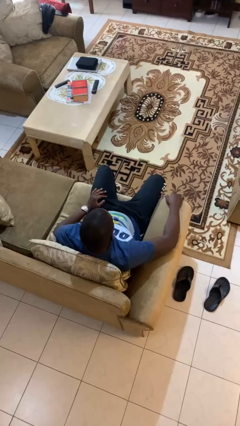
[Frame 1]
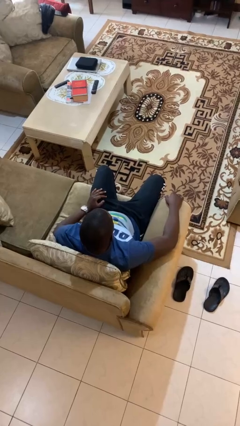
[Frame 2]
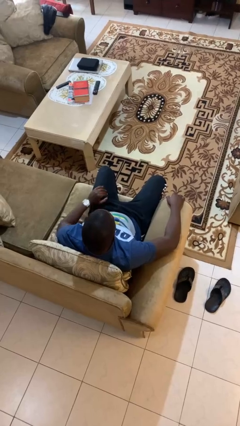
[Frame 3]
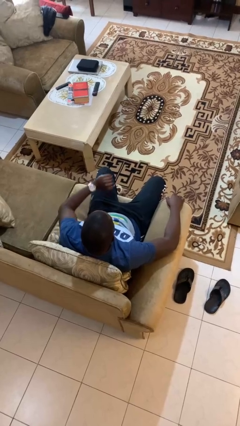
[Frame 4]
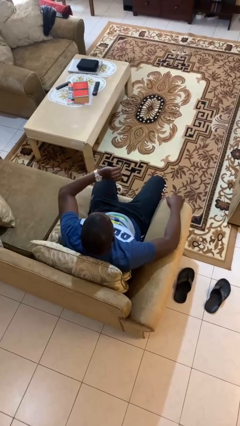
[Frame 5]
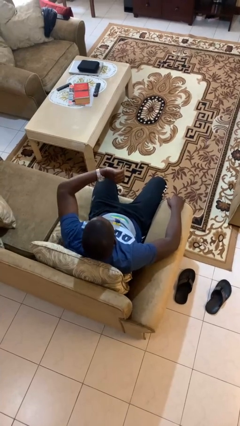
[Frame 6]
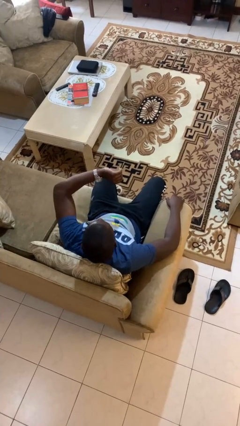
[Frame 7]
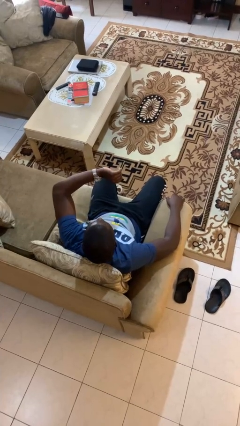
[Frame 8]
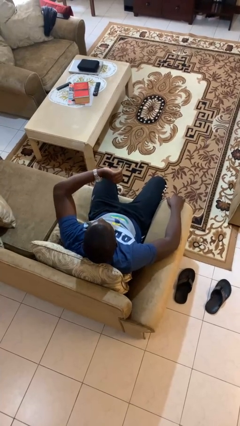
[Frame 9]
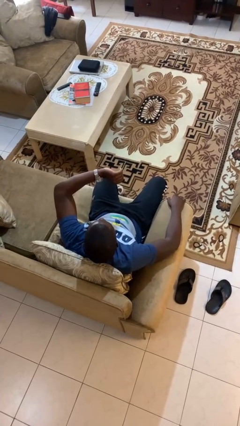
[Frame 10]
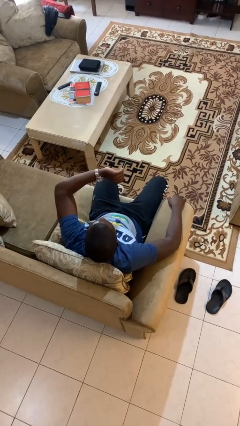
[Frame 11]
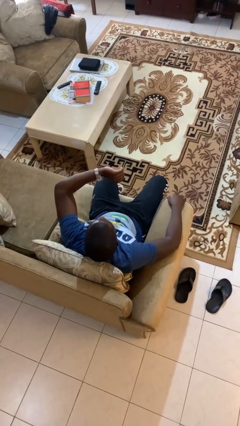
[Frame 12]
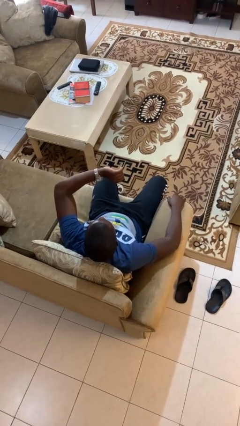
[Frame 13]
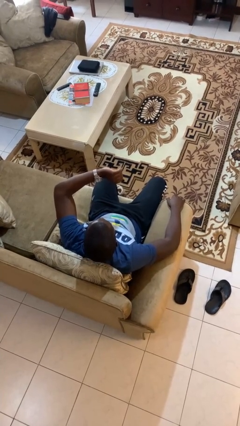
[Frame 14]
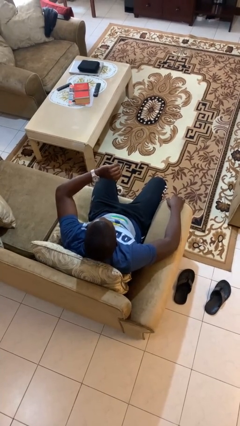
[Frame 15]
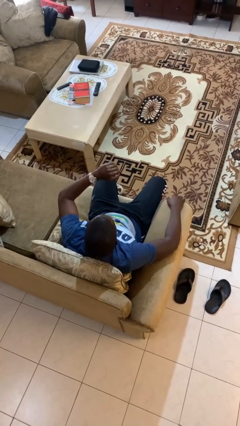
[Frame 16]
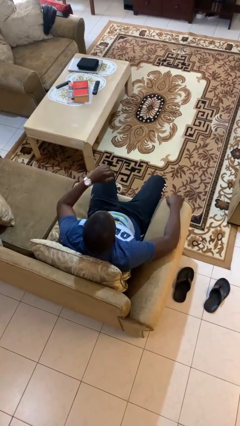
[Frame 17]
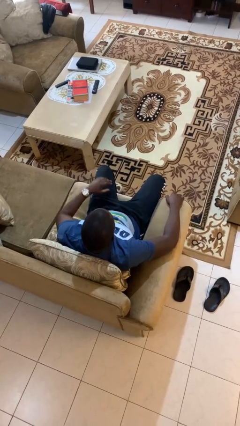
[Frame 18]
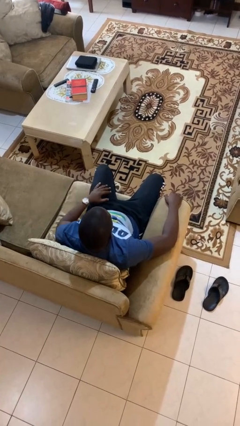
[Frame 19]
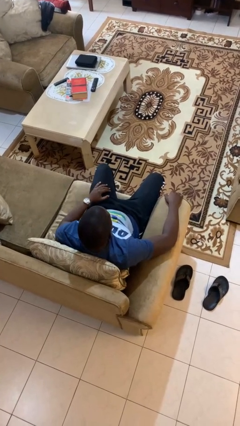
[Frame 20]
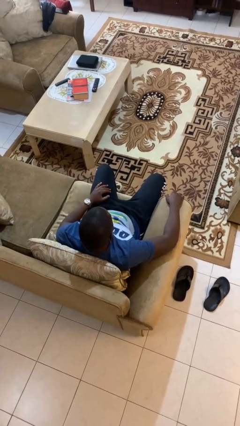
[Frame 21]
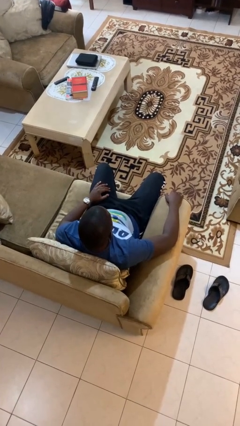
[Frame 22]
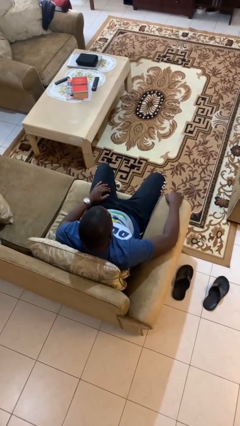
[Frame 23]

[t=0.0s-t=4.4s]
person looks at wristwatch

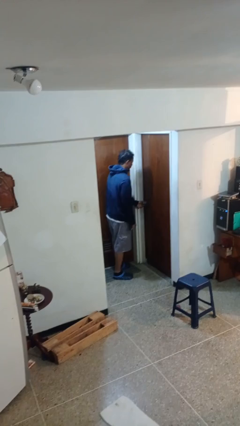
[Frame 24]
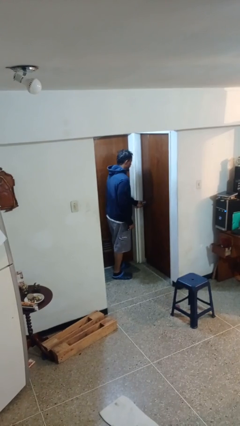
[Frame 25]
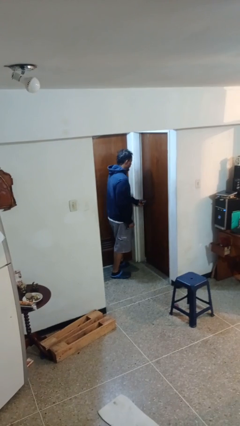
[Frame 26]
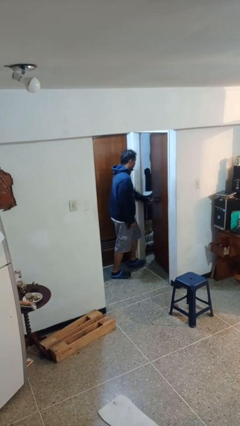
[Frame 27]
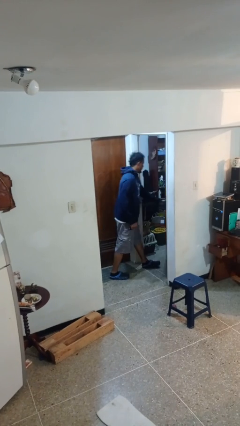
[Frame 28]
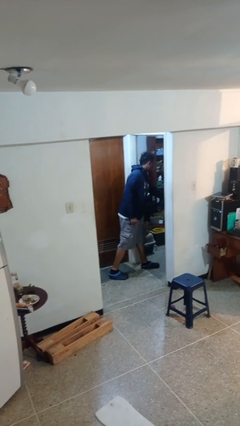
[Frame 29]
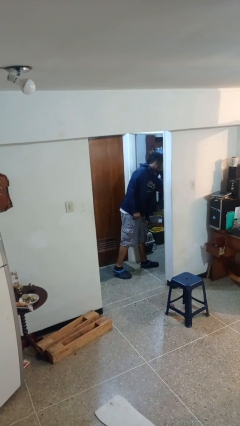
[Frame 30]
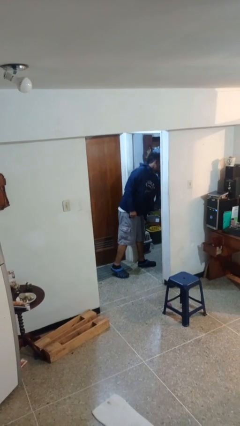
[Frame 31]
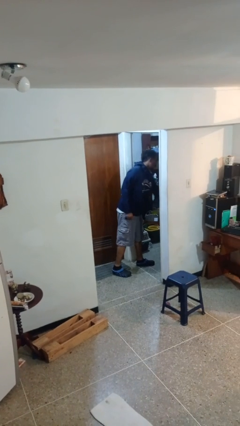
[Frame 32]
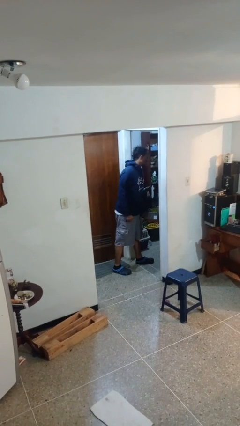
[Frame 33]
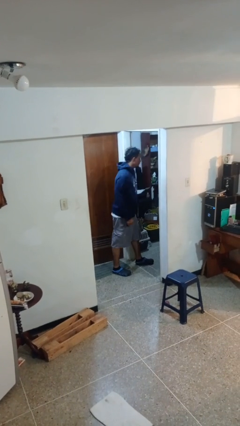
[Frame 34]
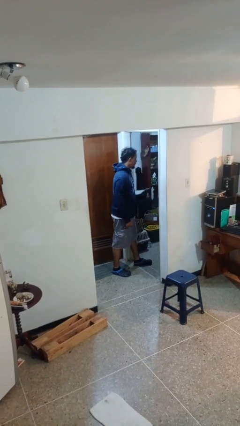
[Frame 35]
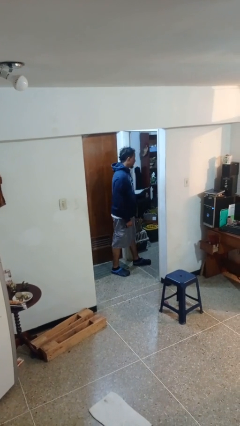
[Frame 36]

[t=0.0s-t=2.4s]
person opens facility door

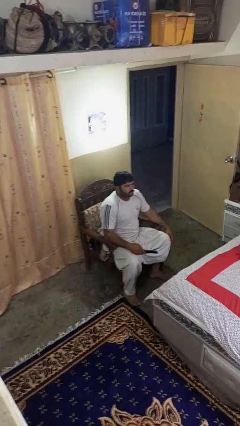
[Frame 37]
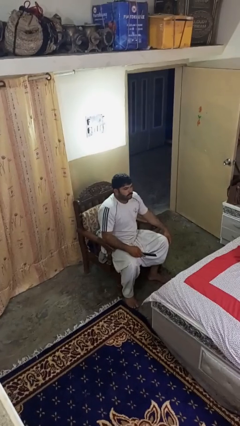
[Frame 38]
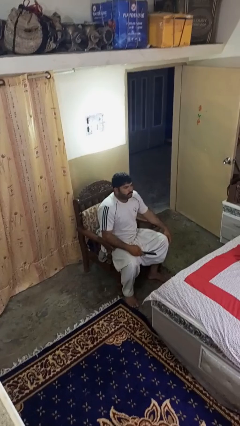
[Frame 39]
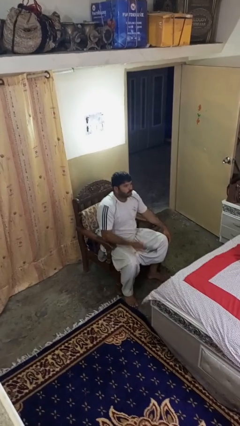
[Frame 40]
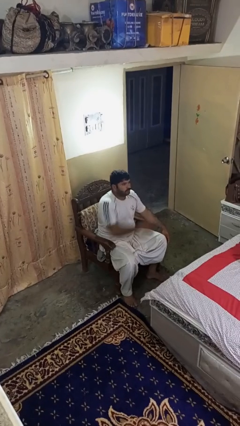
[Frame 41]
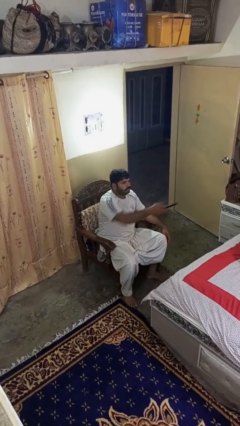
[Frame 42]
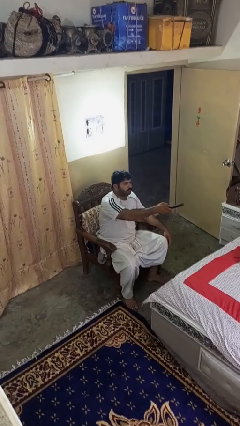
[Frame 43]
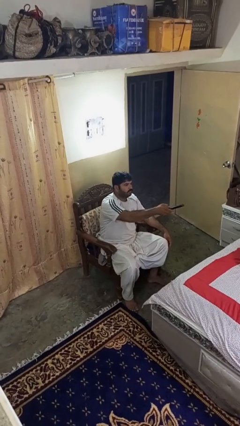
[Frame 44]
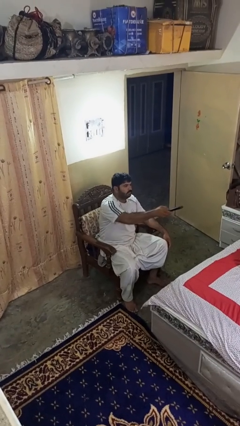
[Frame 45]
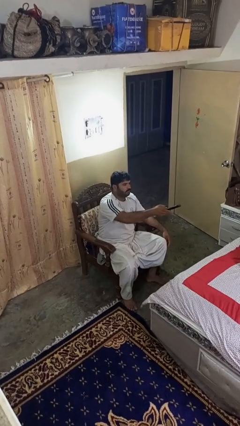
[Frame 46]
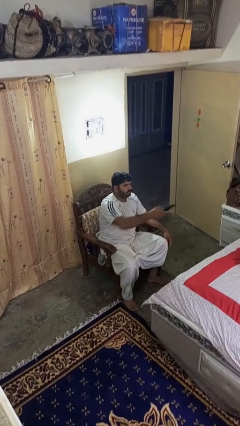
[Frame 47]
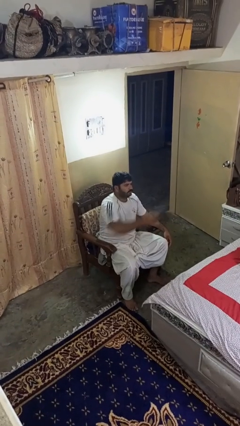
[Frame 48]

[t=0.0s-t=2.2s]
person uses television remote

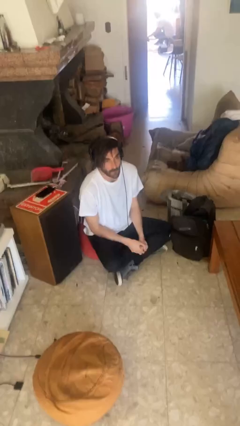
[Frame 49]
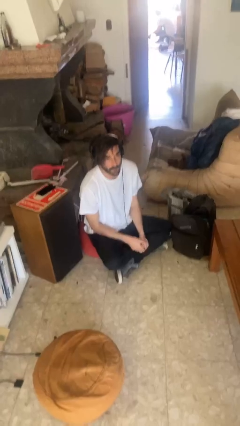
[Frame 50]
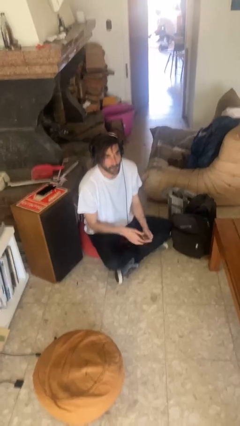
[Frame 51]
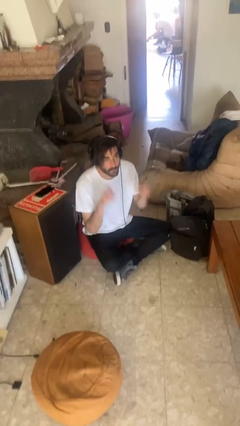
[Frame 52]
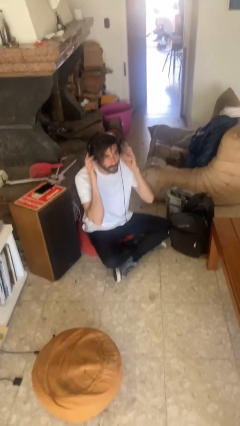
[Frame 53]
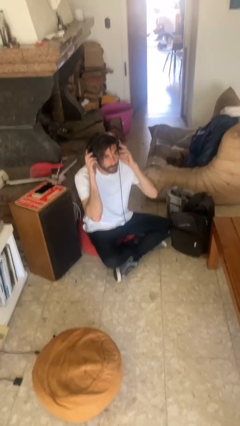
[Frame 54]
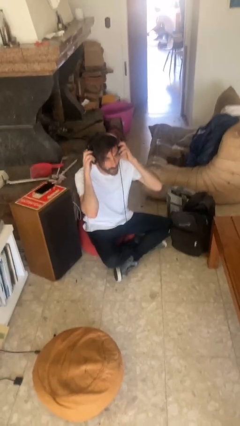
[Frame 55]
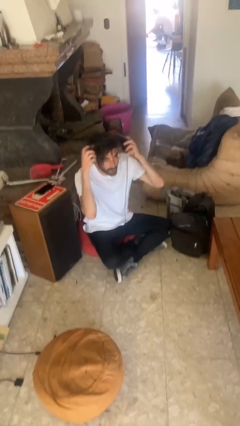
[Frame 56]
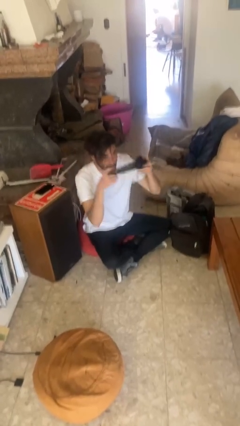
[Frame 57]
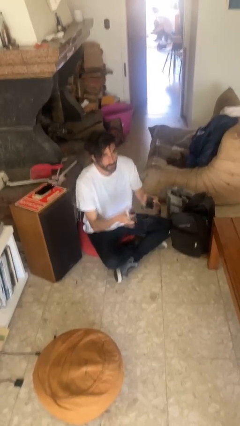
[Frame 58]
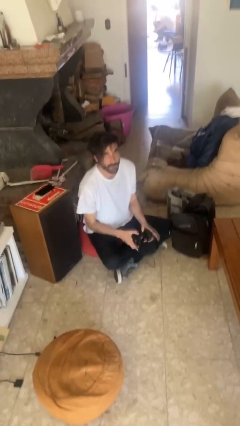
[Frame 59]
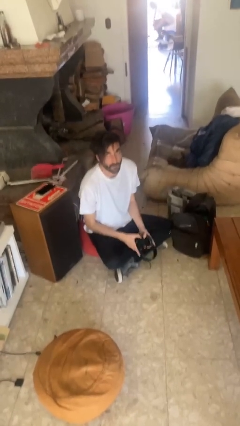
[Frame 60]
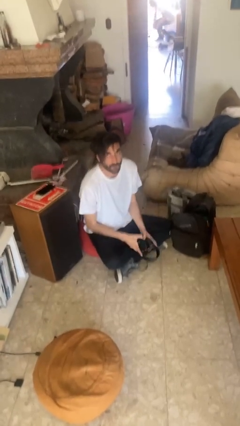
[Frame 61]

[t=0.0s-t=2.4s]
person takes off headphones

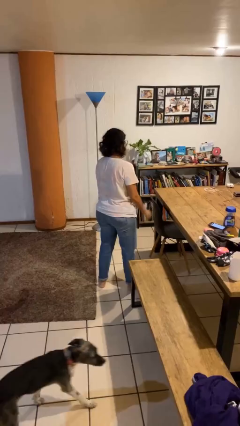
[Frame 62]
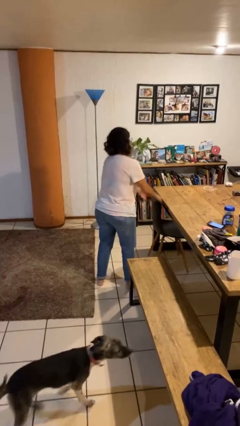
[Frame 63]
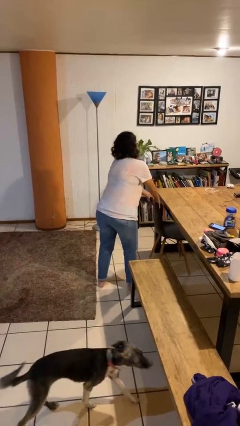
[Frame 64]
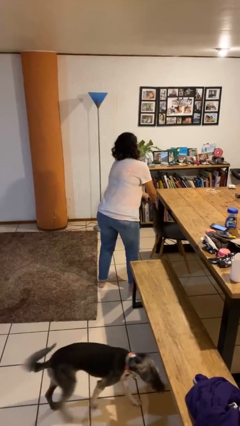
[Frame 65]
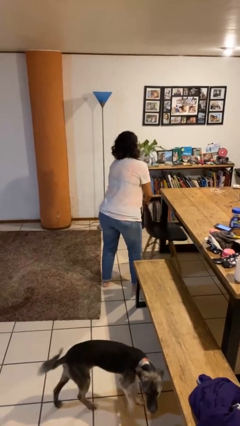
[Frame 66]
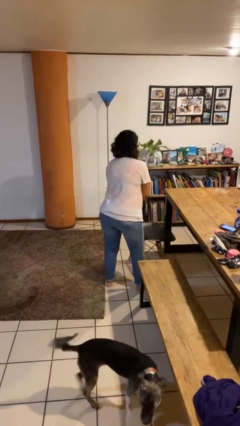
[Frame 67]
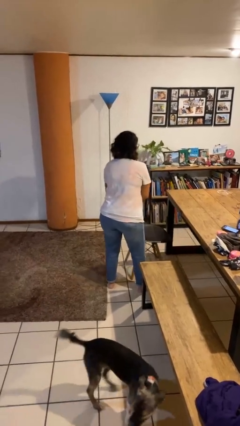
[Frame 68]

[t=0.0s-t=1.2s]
person pulls out chair

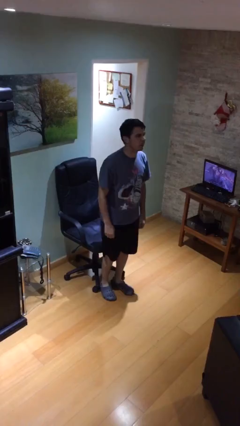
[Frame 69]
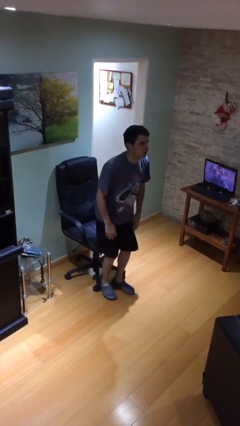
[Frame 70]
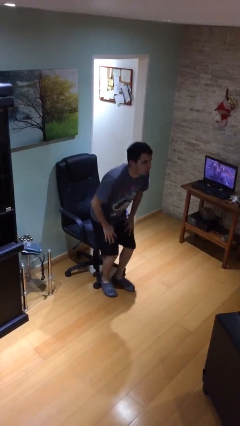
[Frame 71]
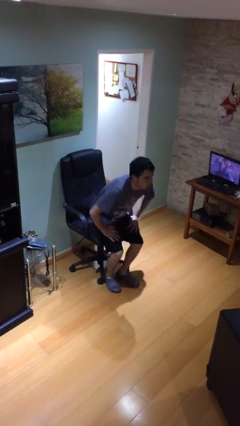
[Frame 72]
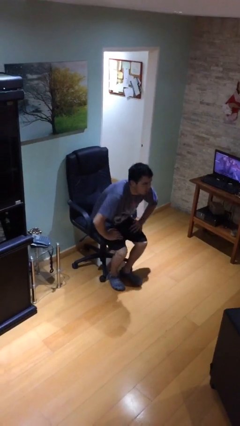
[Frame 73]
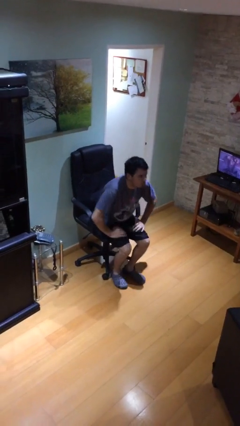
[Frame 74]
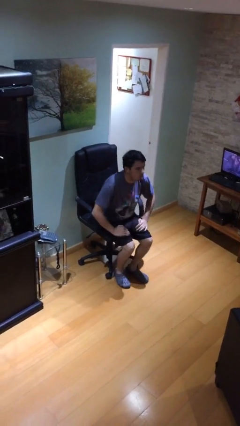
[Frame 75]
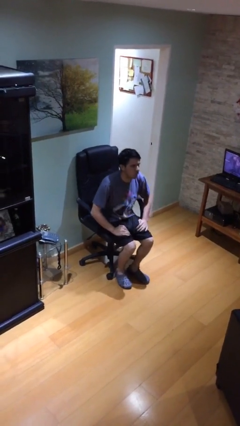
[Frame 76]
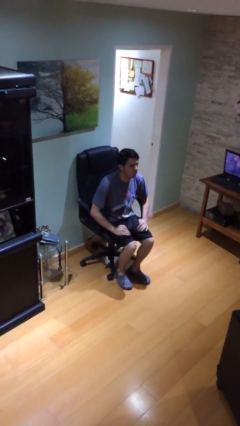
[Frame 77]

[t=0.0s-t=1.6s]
person sits down

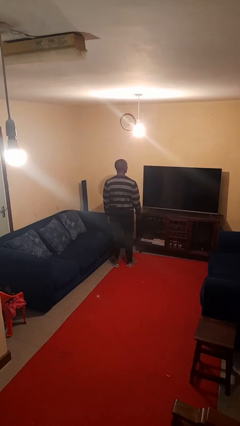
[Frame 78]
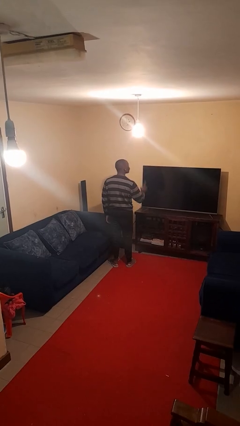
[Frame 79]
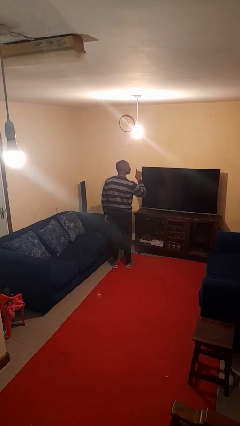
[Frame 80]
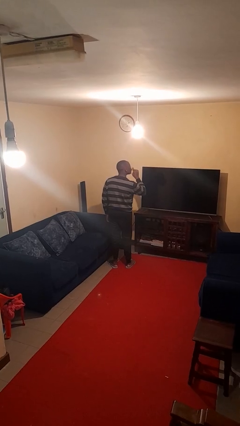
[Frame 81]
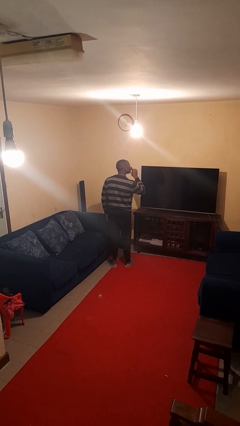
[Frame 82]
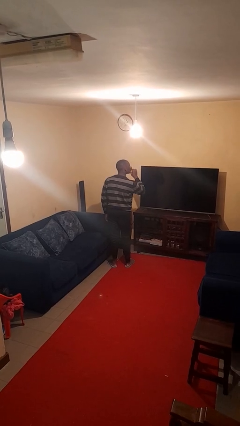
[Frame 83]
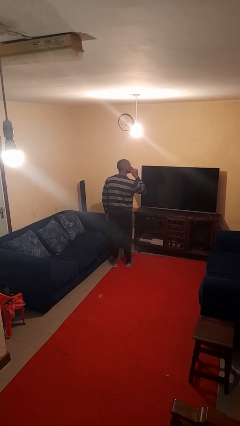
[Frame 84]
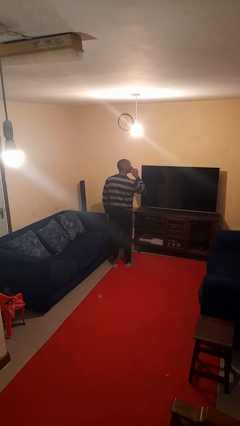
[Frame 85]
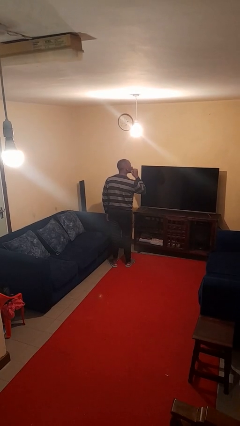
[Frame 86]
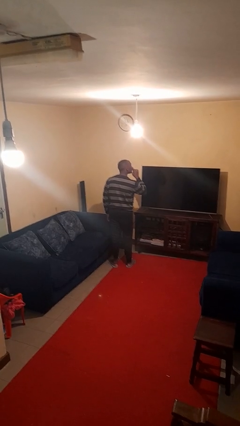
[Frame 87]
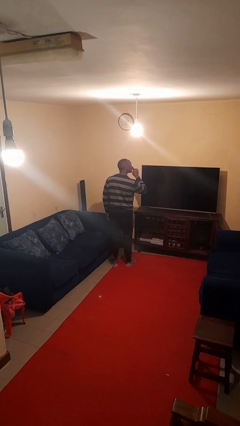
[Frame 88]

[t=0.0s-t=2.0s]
person gestures be quiet

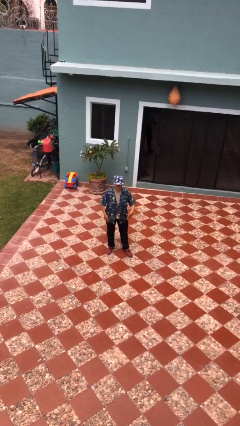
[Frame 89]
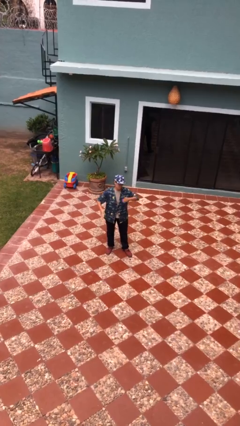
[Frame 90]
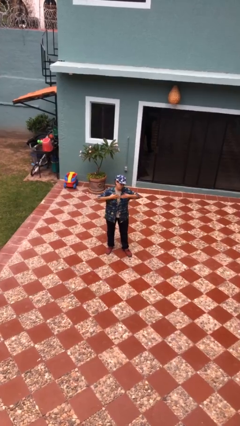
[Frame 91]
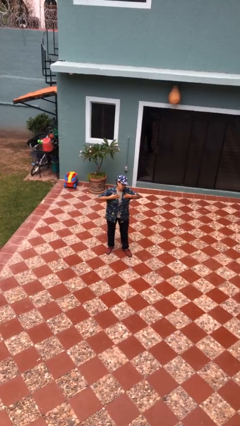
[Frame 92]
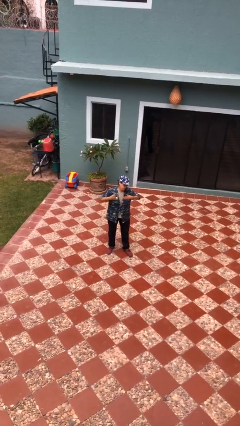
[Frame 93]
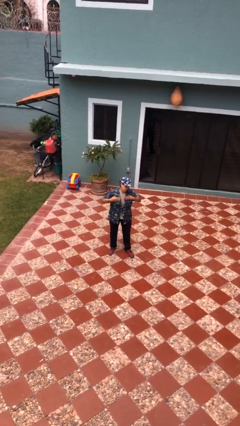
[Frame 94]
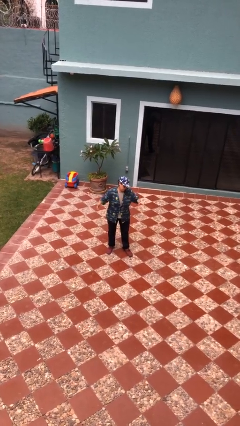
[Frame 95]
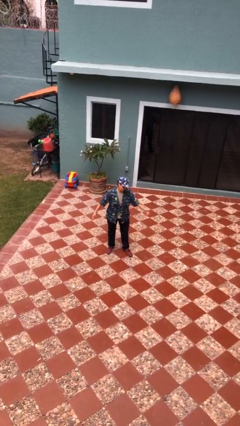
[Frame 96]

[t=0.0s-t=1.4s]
person drums on chest
